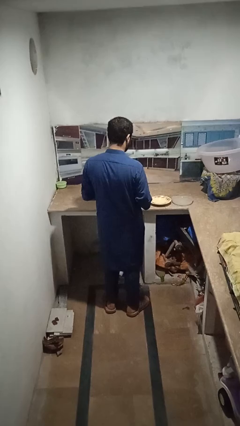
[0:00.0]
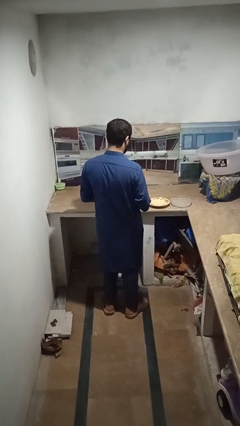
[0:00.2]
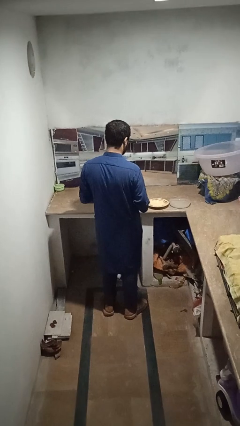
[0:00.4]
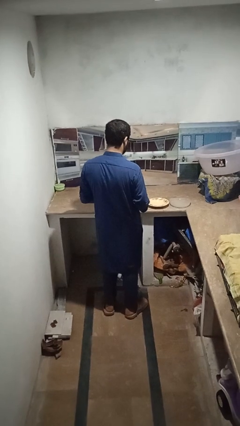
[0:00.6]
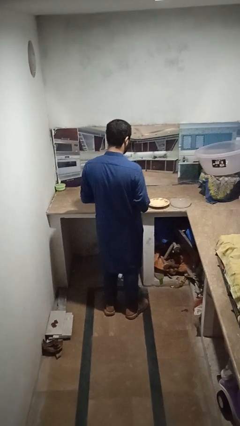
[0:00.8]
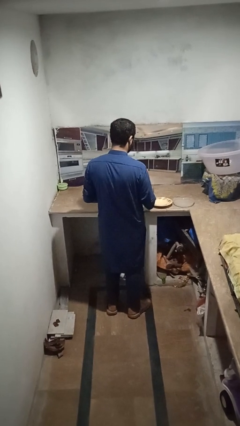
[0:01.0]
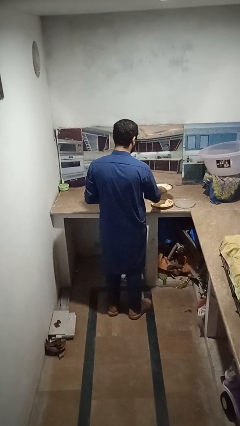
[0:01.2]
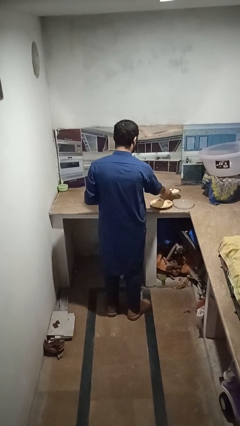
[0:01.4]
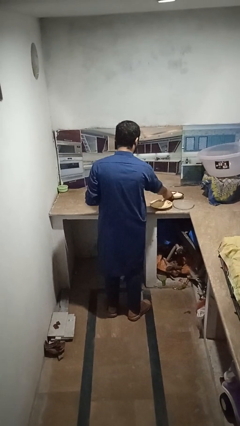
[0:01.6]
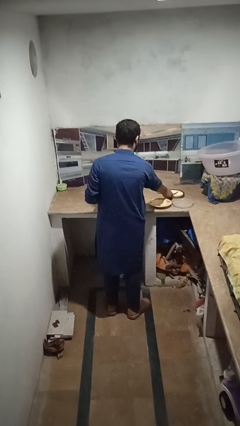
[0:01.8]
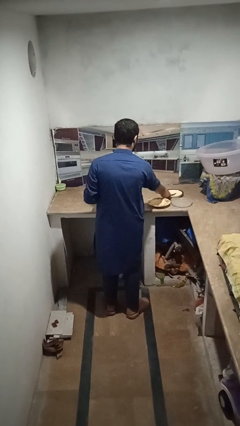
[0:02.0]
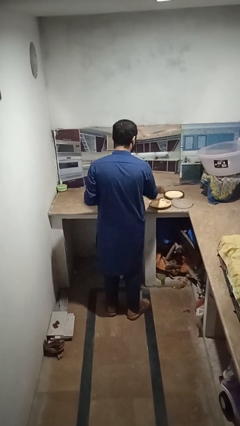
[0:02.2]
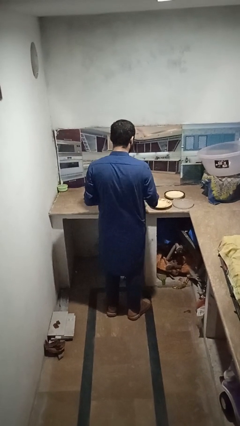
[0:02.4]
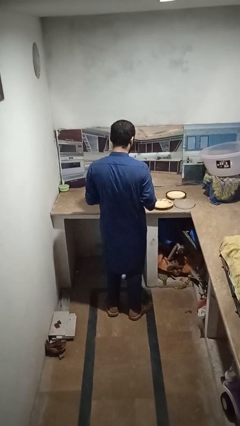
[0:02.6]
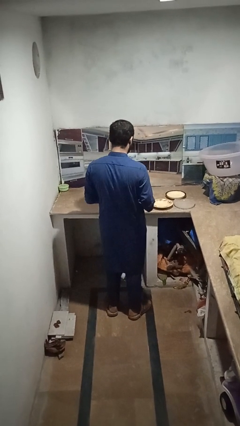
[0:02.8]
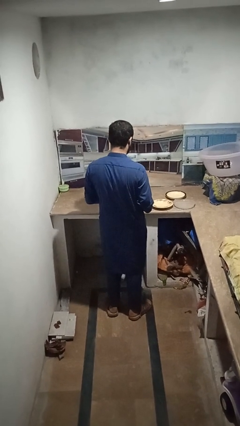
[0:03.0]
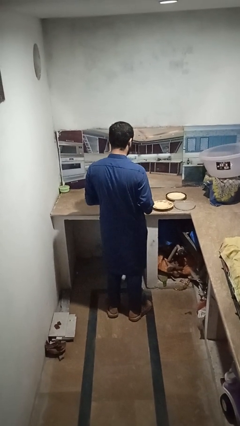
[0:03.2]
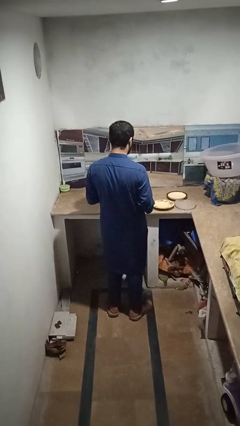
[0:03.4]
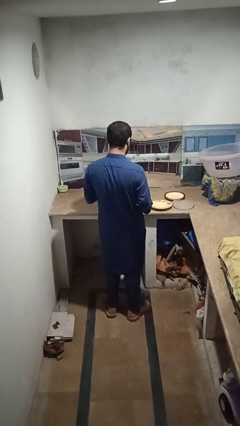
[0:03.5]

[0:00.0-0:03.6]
person sets table

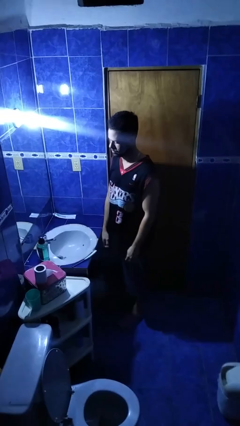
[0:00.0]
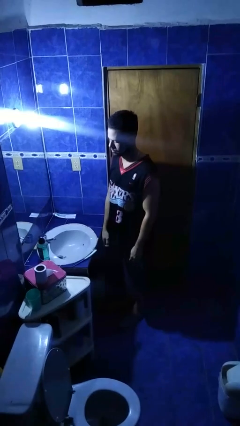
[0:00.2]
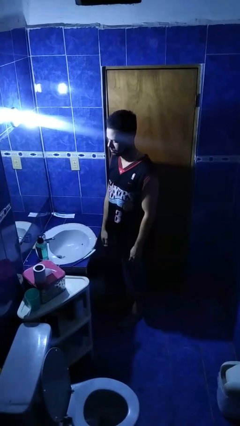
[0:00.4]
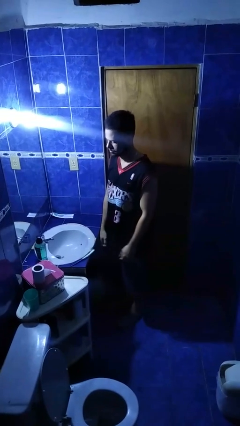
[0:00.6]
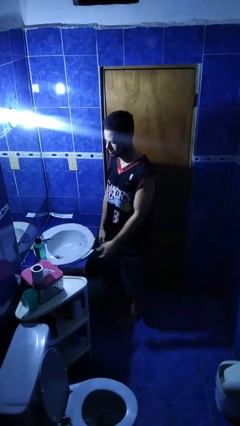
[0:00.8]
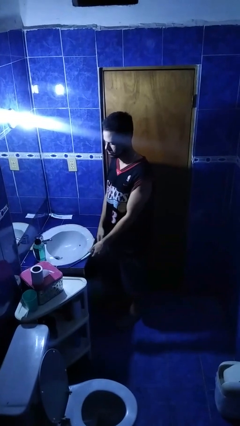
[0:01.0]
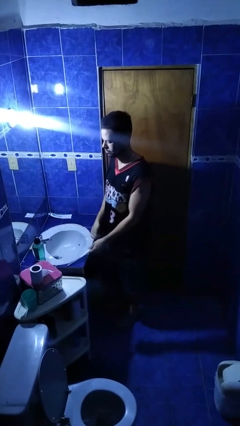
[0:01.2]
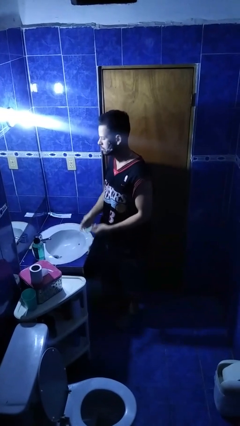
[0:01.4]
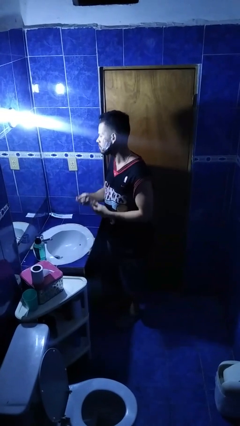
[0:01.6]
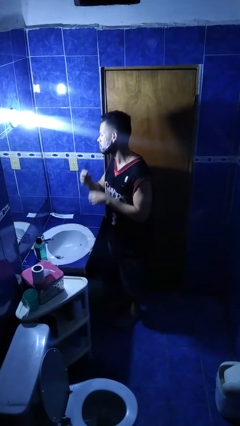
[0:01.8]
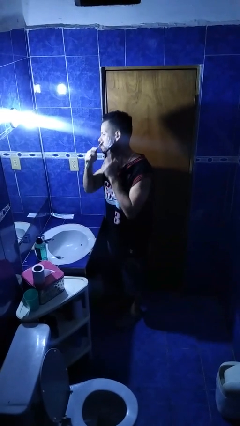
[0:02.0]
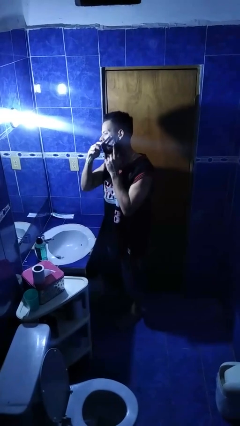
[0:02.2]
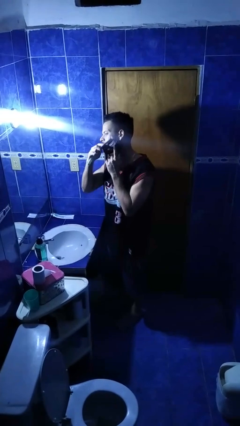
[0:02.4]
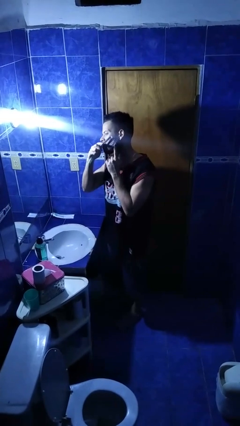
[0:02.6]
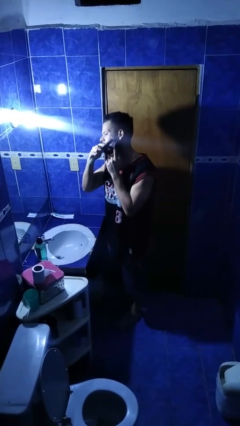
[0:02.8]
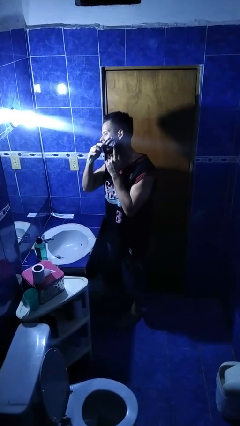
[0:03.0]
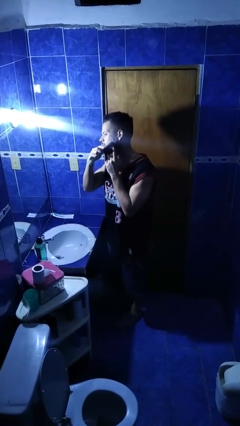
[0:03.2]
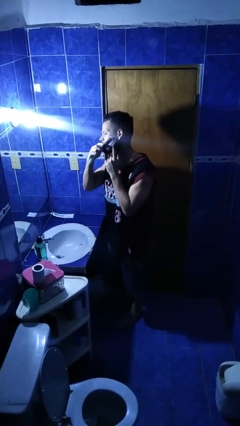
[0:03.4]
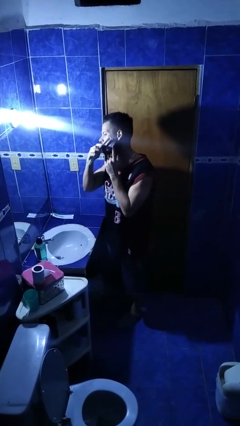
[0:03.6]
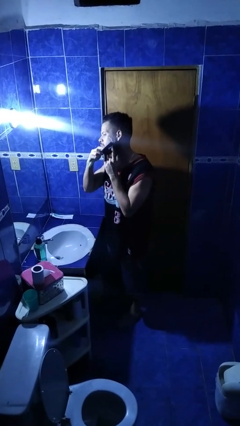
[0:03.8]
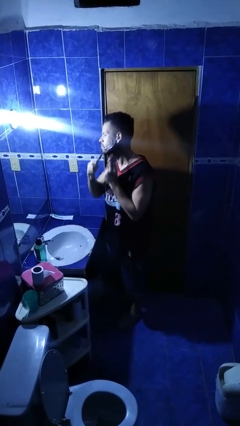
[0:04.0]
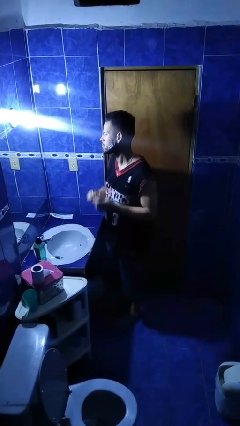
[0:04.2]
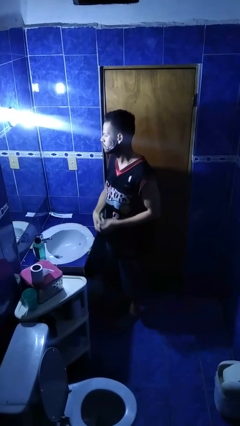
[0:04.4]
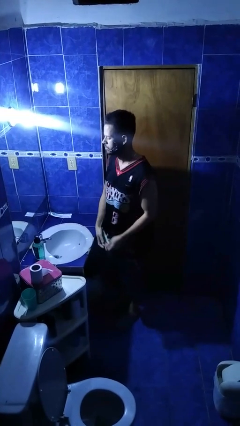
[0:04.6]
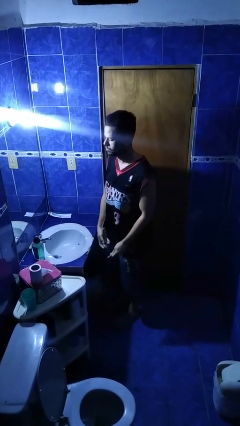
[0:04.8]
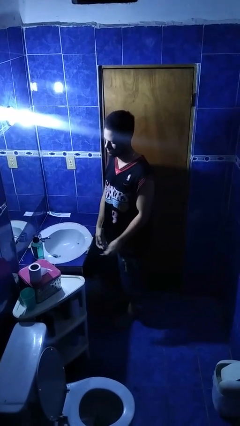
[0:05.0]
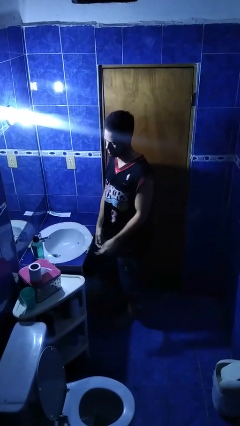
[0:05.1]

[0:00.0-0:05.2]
person shaves face

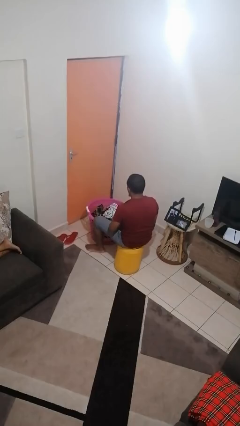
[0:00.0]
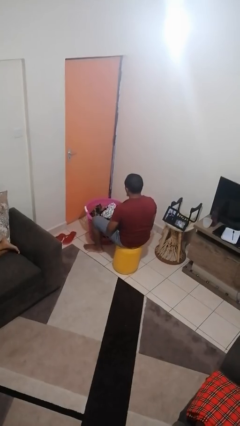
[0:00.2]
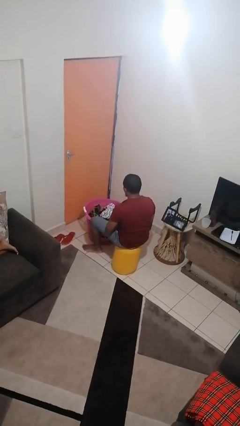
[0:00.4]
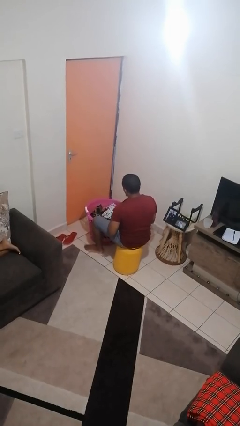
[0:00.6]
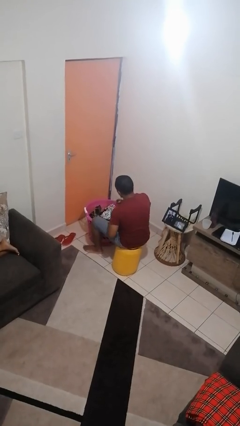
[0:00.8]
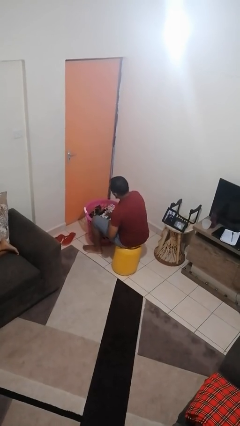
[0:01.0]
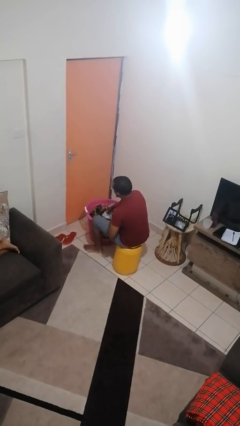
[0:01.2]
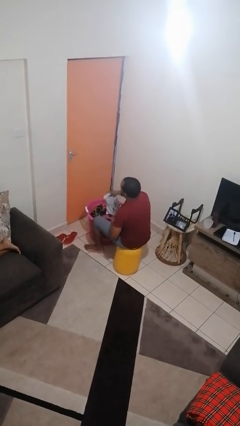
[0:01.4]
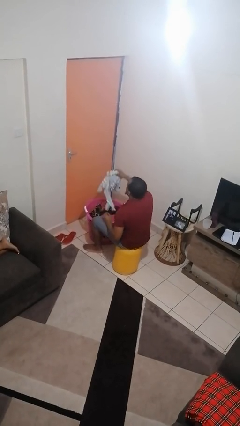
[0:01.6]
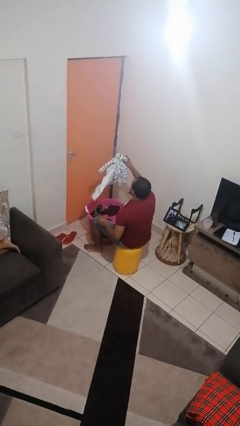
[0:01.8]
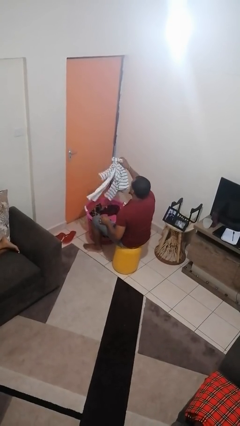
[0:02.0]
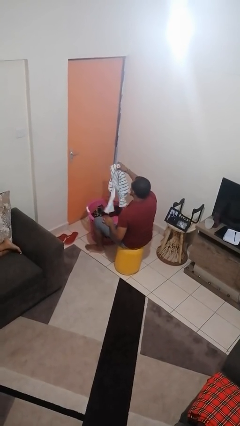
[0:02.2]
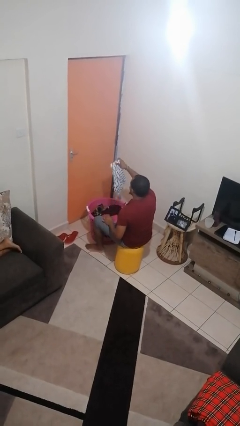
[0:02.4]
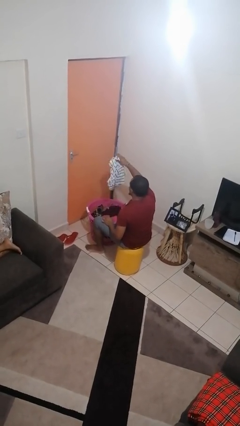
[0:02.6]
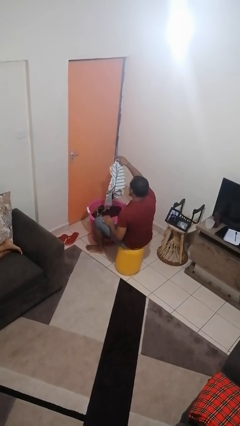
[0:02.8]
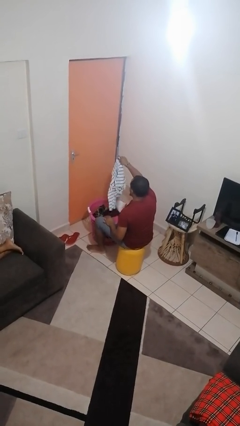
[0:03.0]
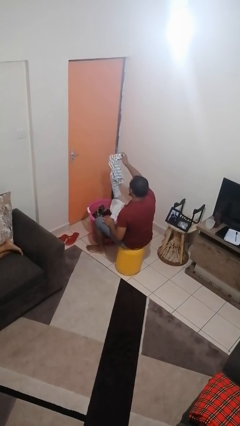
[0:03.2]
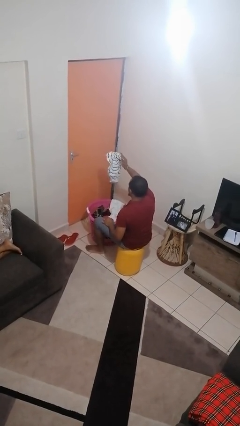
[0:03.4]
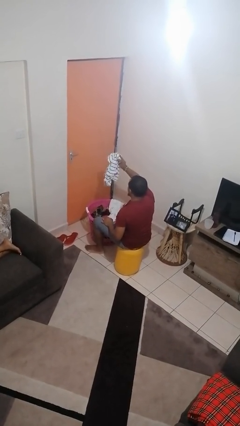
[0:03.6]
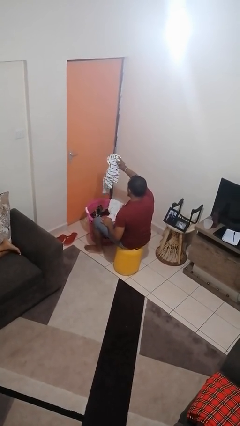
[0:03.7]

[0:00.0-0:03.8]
person takes object from basket

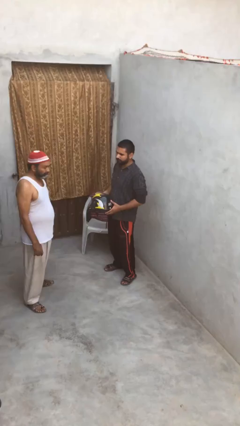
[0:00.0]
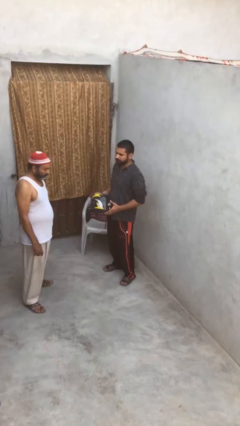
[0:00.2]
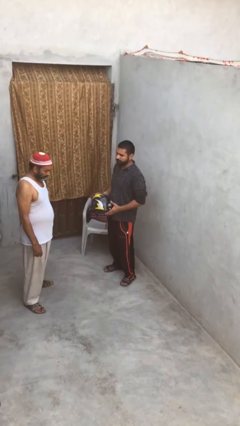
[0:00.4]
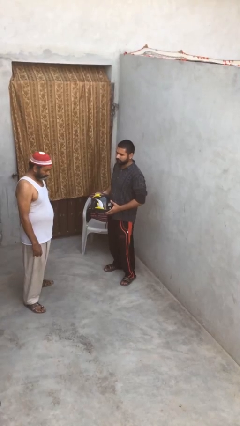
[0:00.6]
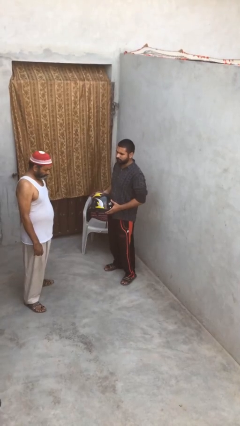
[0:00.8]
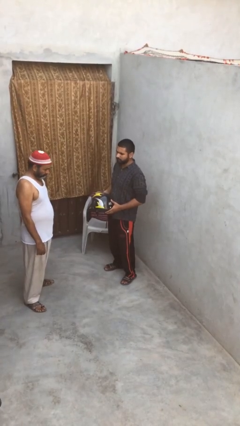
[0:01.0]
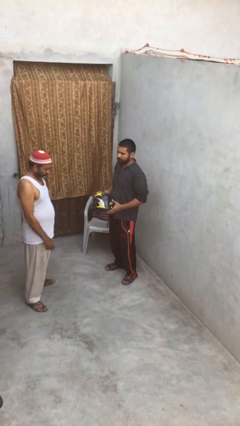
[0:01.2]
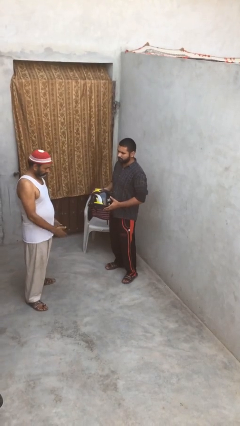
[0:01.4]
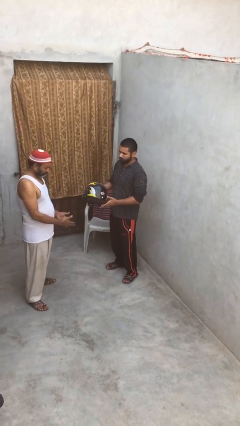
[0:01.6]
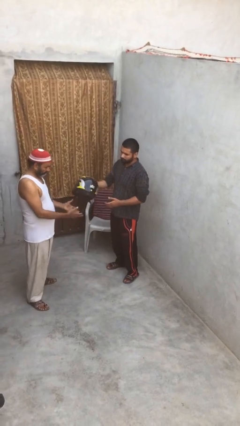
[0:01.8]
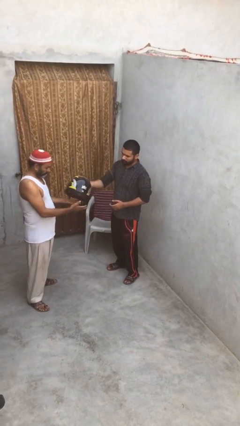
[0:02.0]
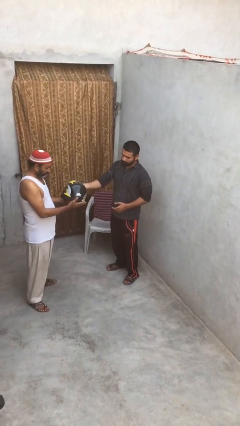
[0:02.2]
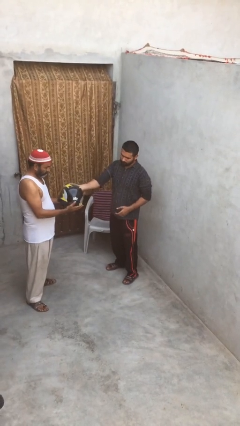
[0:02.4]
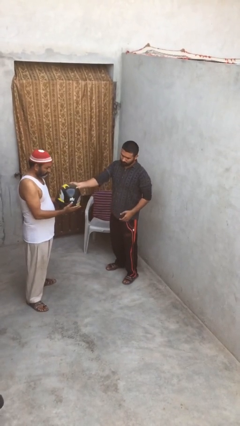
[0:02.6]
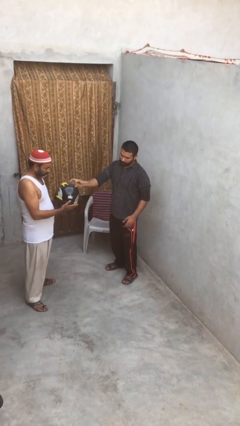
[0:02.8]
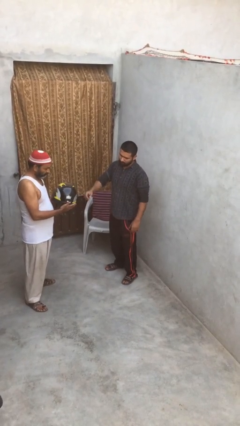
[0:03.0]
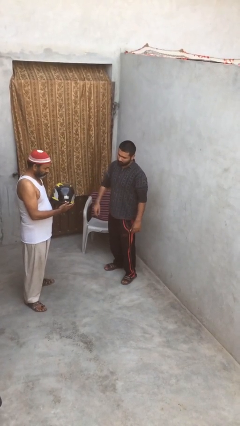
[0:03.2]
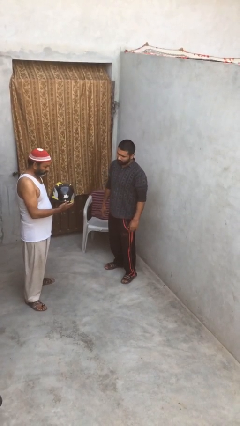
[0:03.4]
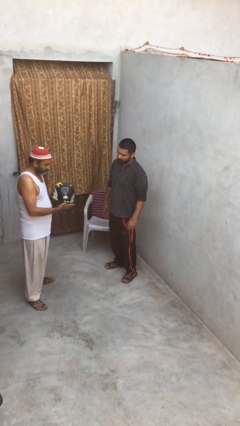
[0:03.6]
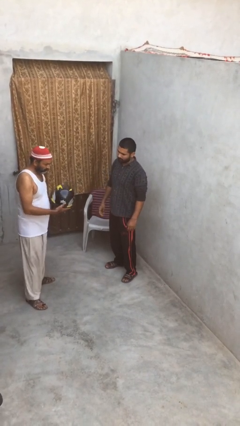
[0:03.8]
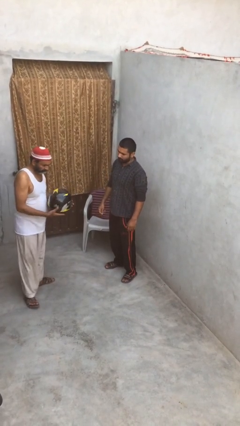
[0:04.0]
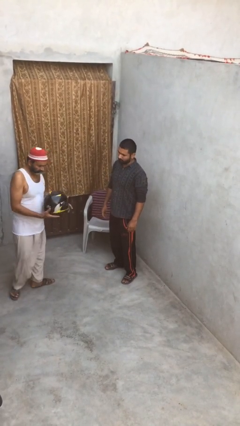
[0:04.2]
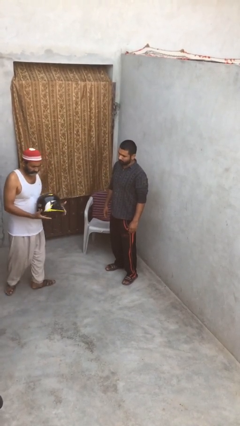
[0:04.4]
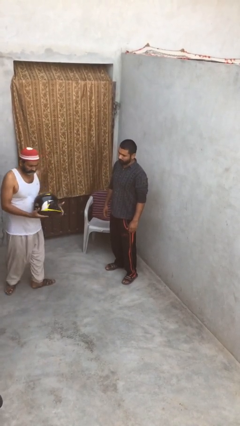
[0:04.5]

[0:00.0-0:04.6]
person transfers object to person

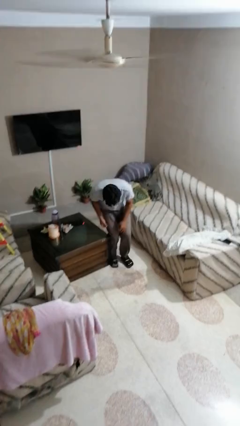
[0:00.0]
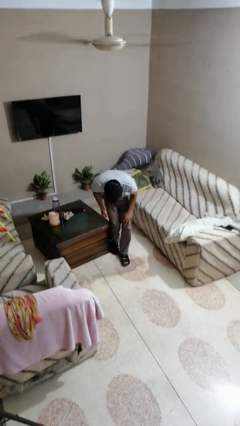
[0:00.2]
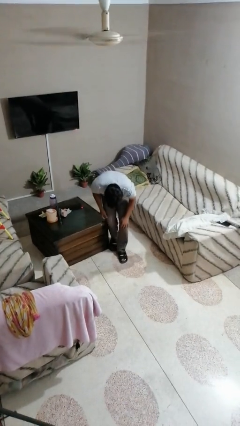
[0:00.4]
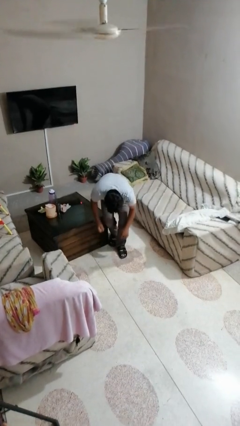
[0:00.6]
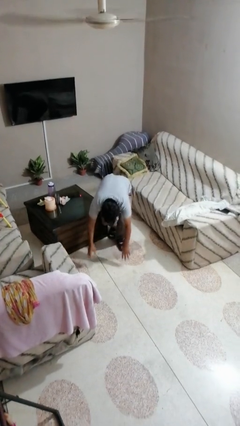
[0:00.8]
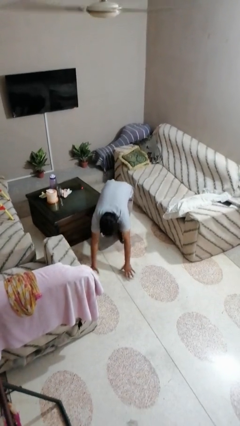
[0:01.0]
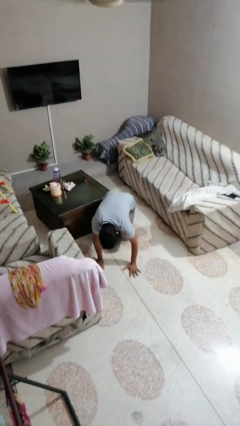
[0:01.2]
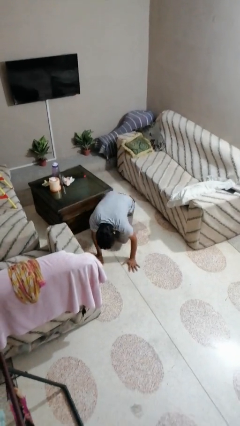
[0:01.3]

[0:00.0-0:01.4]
person lies down on floor
